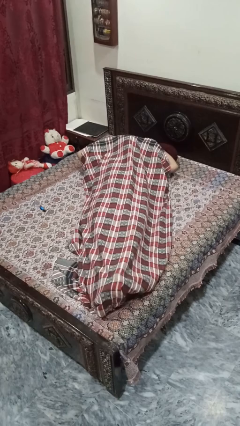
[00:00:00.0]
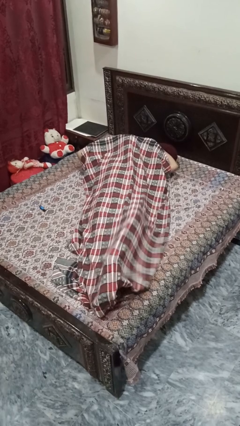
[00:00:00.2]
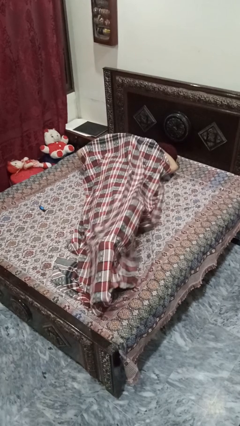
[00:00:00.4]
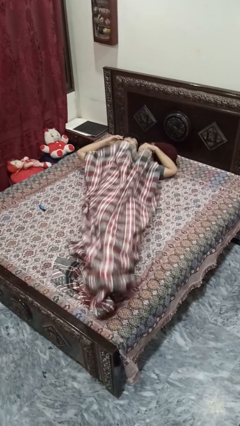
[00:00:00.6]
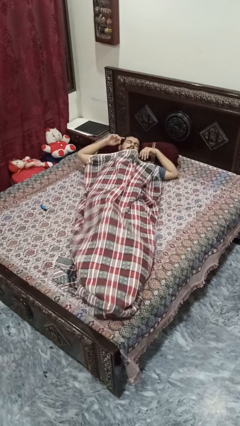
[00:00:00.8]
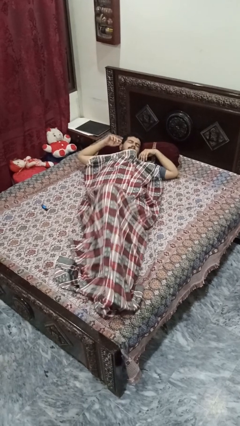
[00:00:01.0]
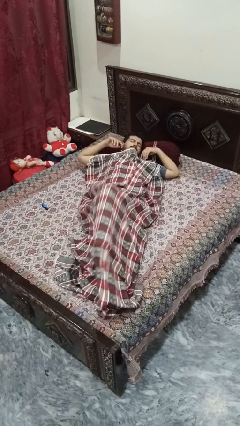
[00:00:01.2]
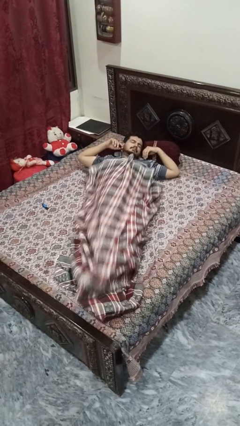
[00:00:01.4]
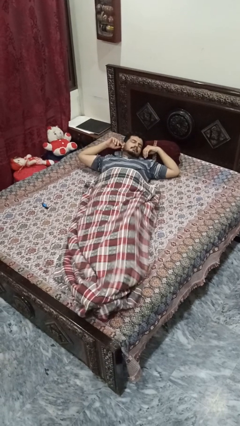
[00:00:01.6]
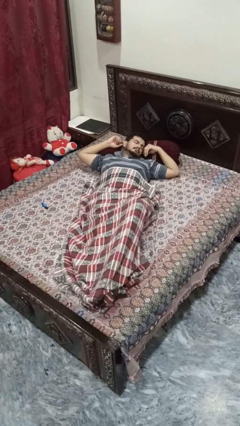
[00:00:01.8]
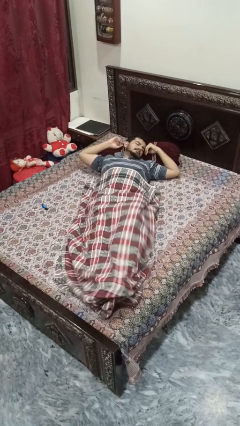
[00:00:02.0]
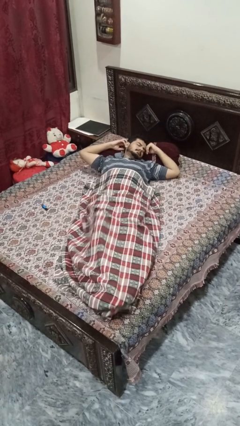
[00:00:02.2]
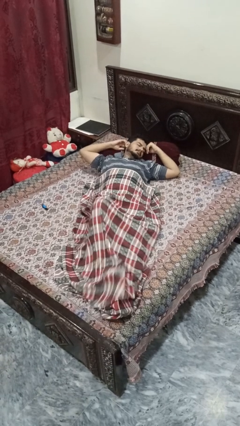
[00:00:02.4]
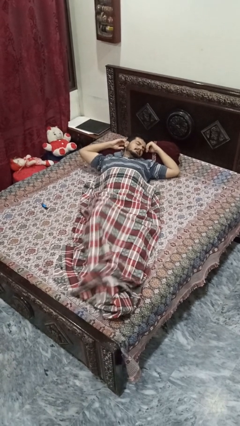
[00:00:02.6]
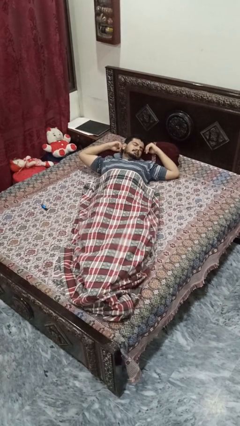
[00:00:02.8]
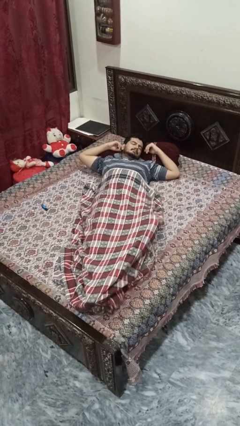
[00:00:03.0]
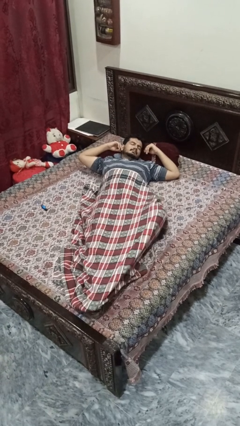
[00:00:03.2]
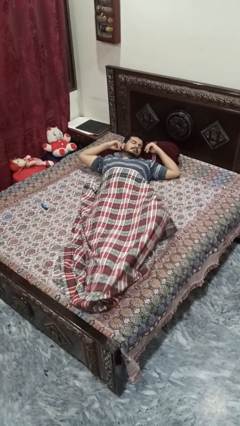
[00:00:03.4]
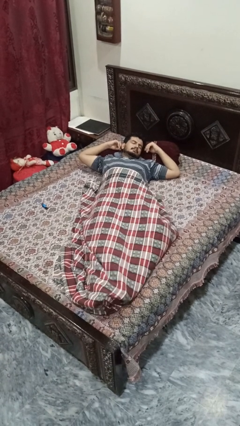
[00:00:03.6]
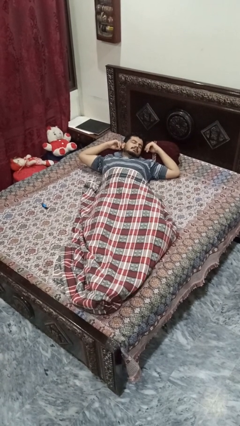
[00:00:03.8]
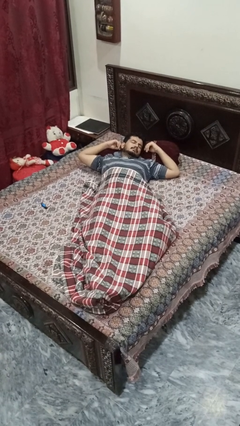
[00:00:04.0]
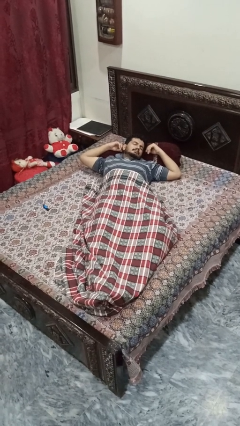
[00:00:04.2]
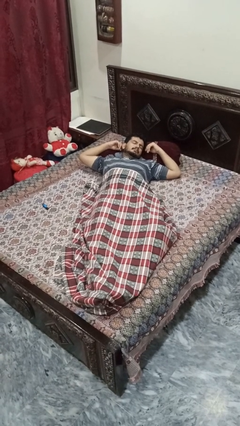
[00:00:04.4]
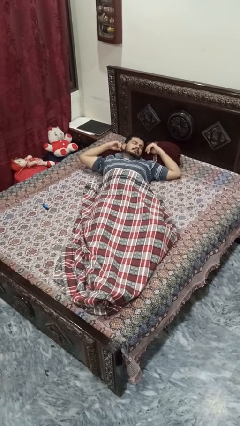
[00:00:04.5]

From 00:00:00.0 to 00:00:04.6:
person uncovers with bedsheets

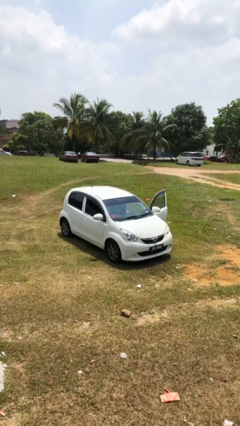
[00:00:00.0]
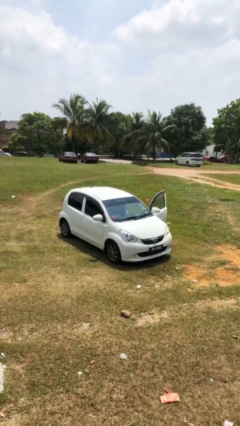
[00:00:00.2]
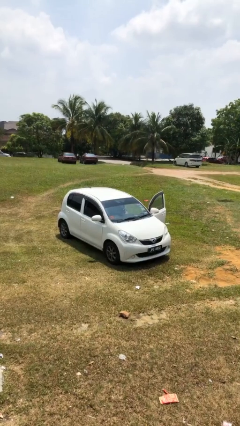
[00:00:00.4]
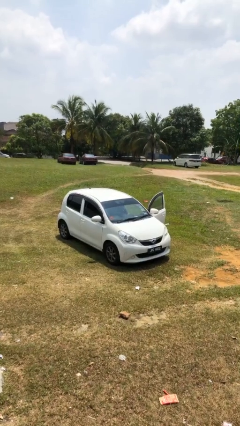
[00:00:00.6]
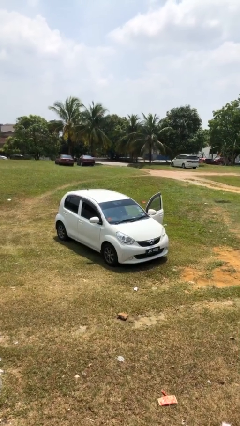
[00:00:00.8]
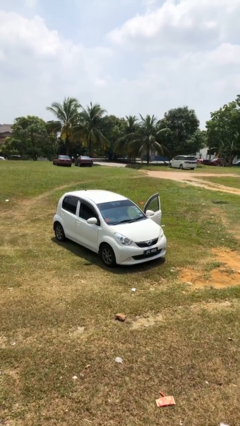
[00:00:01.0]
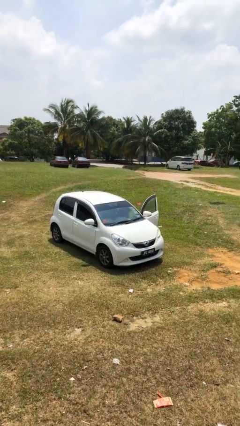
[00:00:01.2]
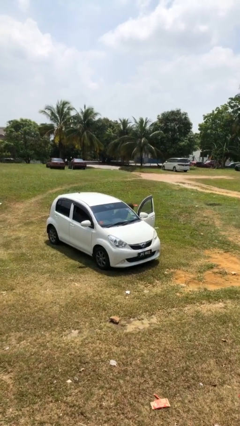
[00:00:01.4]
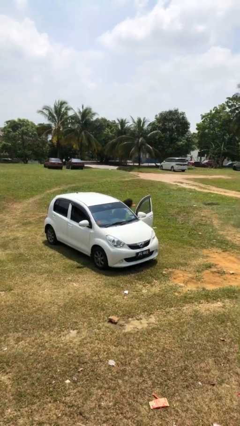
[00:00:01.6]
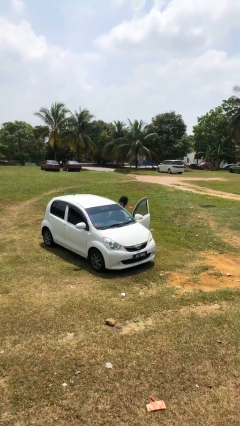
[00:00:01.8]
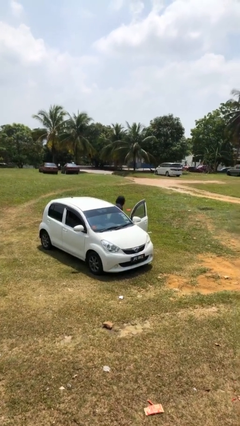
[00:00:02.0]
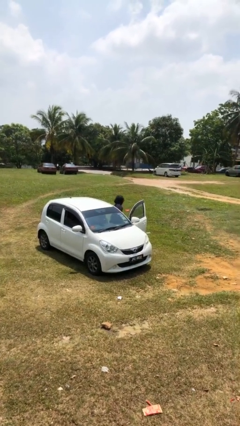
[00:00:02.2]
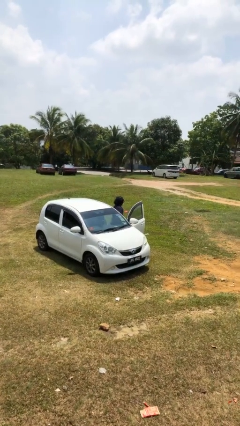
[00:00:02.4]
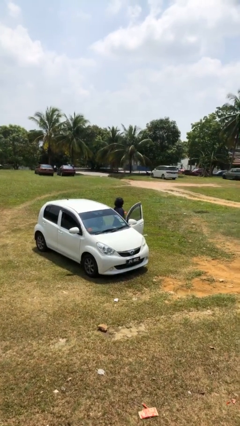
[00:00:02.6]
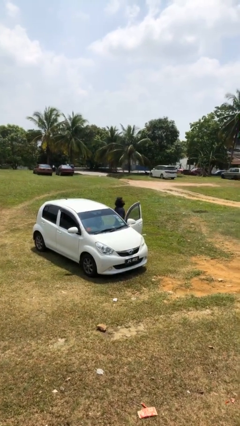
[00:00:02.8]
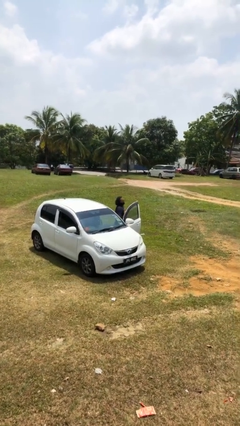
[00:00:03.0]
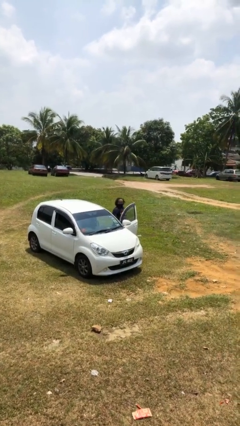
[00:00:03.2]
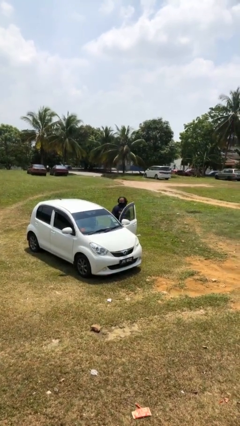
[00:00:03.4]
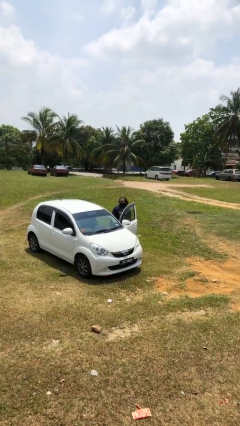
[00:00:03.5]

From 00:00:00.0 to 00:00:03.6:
person exits car

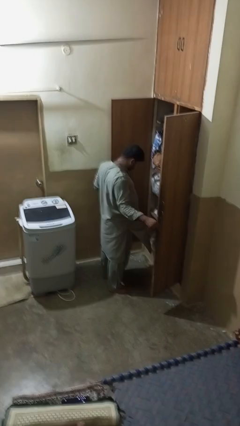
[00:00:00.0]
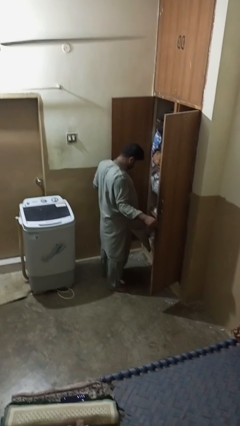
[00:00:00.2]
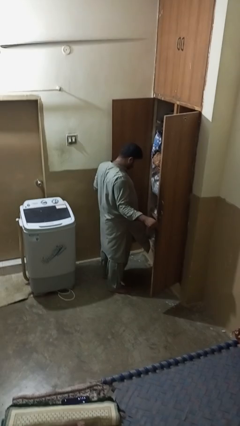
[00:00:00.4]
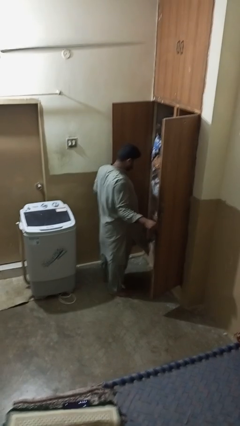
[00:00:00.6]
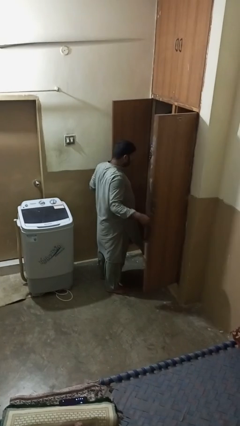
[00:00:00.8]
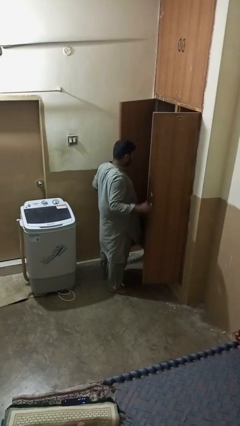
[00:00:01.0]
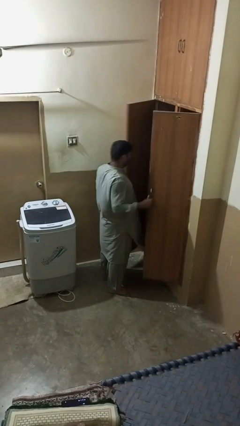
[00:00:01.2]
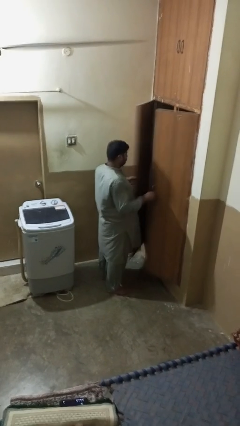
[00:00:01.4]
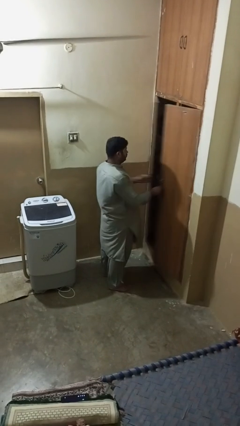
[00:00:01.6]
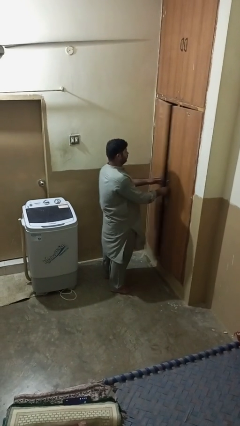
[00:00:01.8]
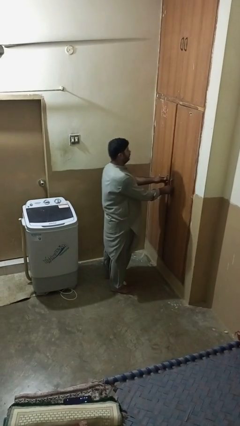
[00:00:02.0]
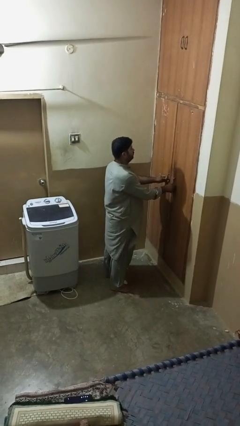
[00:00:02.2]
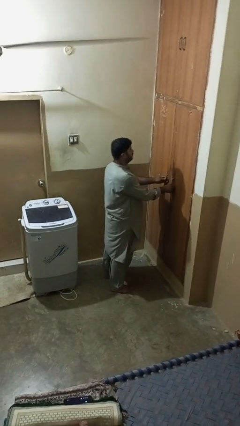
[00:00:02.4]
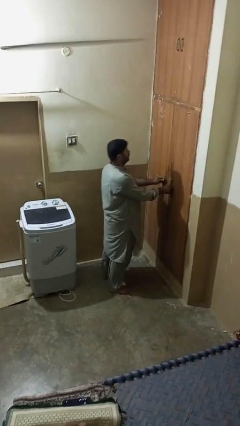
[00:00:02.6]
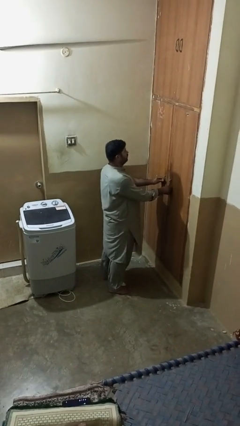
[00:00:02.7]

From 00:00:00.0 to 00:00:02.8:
person closes closet door

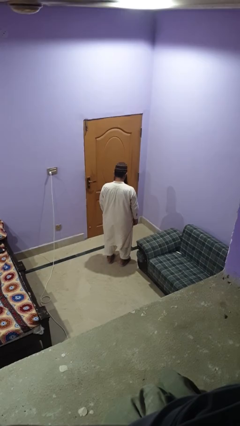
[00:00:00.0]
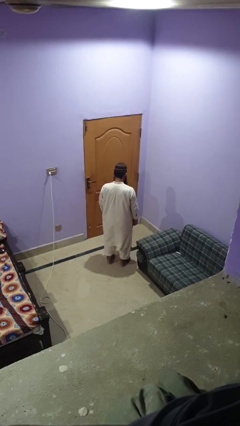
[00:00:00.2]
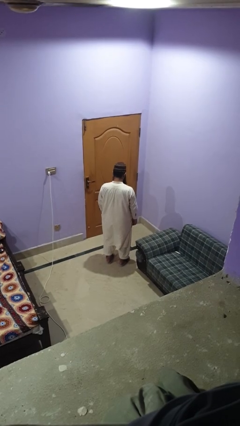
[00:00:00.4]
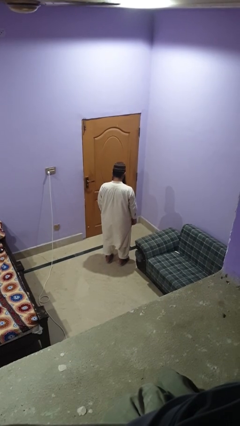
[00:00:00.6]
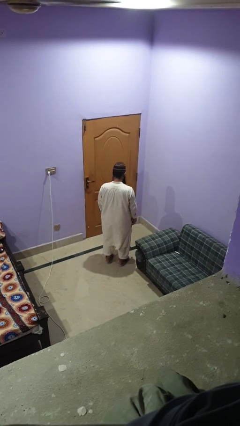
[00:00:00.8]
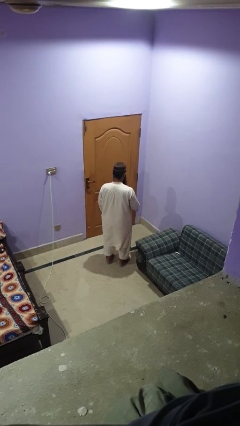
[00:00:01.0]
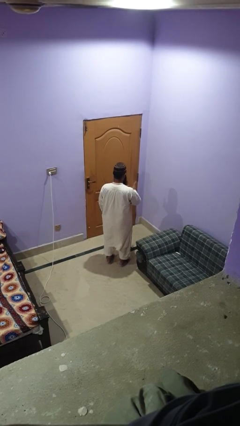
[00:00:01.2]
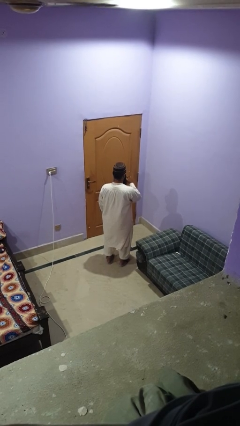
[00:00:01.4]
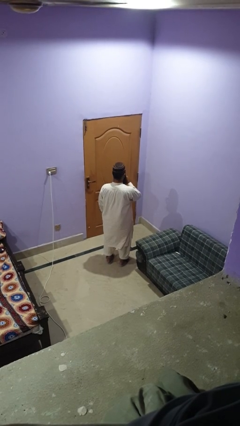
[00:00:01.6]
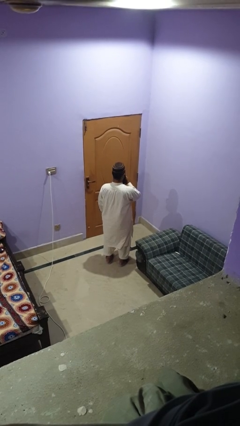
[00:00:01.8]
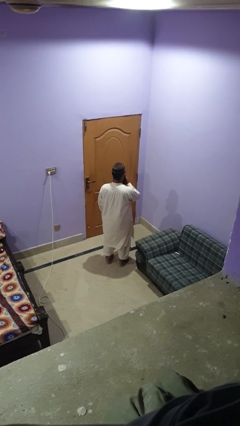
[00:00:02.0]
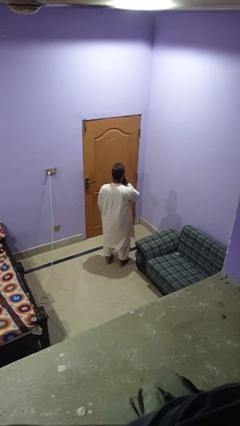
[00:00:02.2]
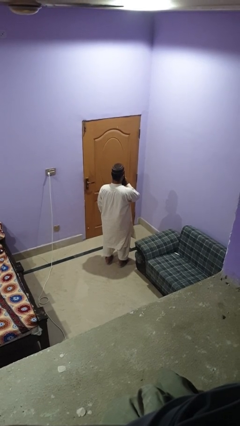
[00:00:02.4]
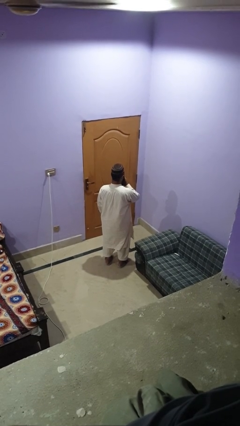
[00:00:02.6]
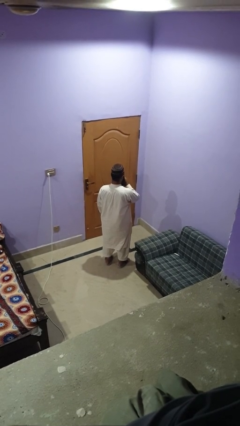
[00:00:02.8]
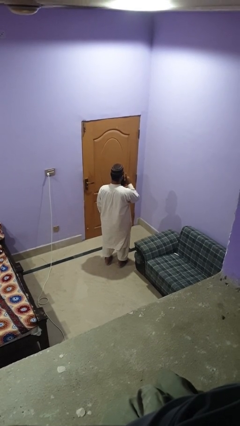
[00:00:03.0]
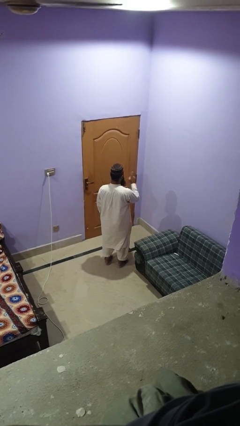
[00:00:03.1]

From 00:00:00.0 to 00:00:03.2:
person gestures be quiet

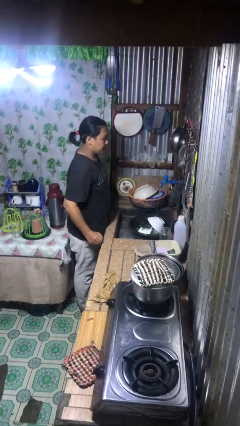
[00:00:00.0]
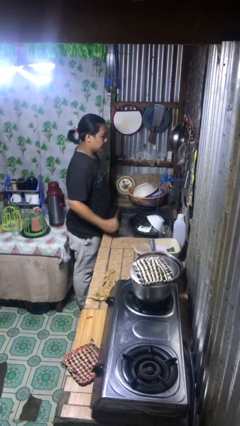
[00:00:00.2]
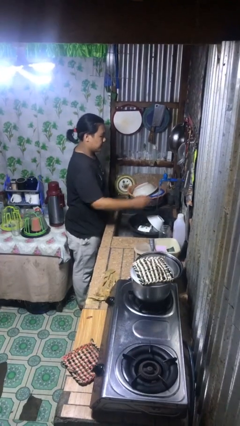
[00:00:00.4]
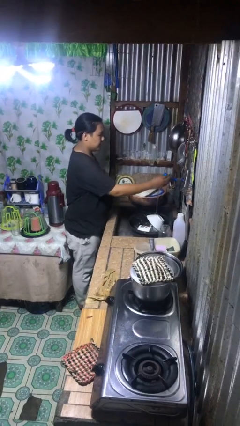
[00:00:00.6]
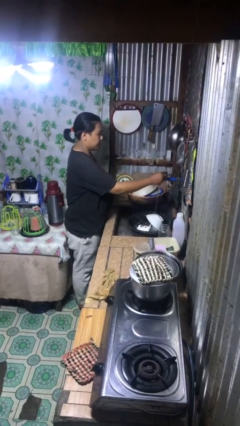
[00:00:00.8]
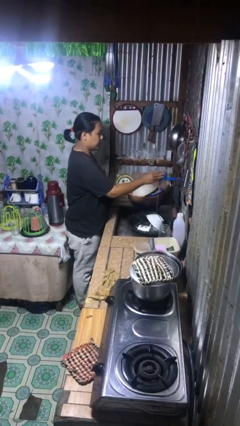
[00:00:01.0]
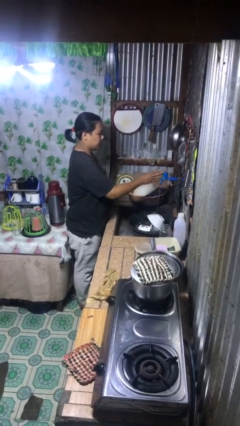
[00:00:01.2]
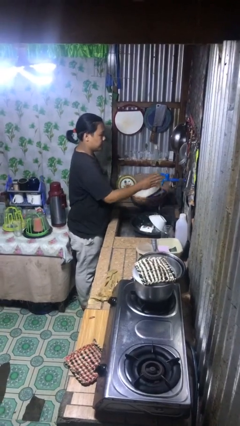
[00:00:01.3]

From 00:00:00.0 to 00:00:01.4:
person turns off faucet

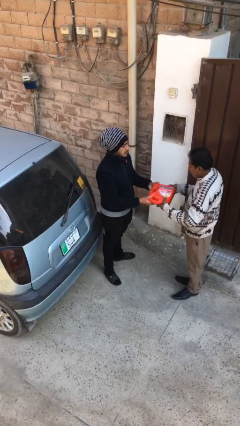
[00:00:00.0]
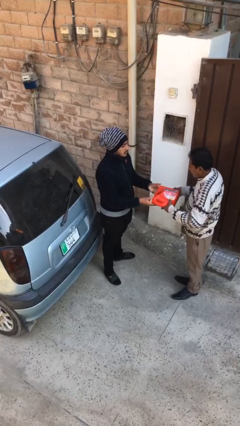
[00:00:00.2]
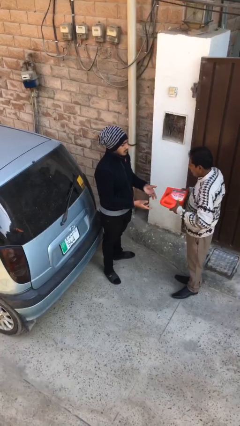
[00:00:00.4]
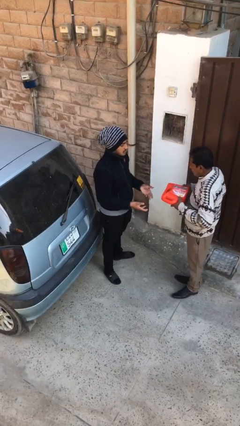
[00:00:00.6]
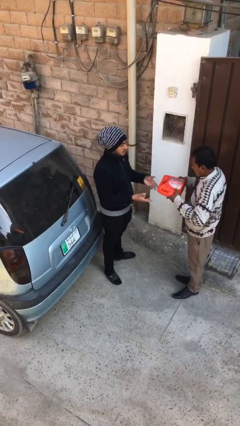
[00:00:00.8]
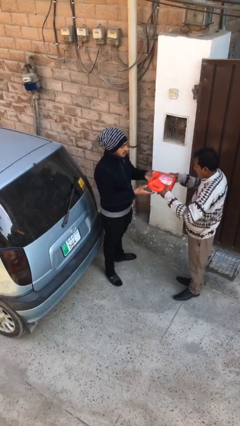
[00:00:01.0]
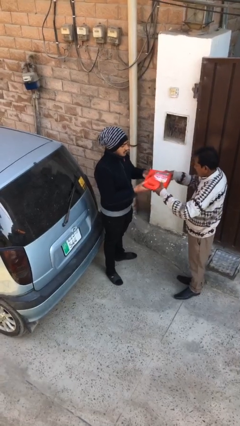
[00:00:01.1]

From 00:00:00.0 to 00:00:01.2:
person transfers object to person
